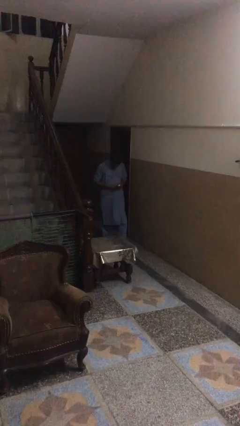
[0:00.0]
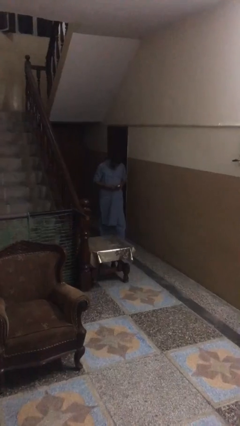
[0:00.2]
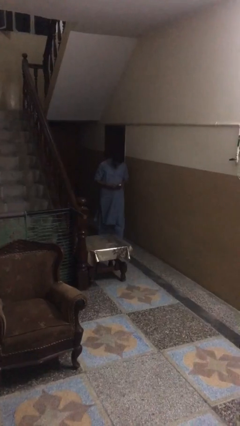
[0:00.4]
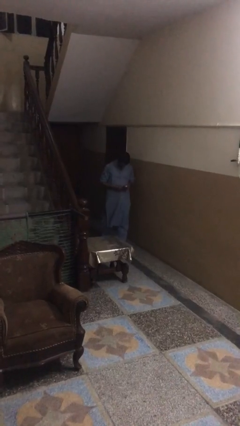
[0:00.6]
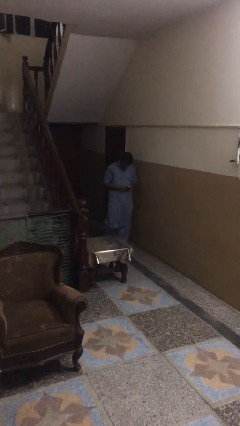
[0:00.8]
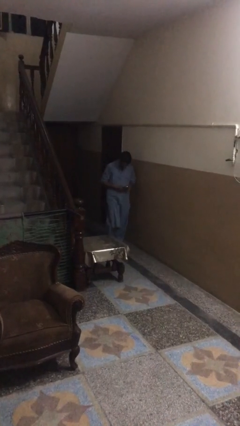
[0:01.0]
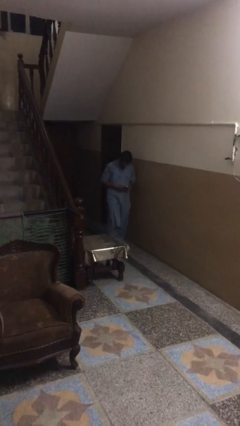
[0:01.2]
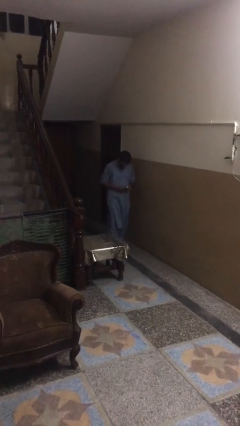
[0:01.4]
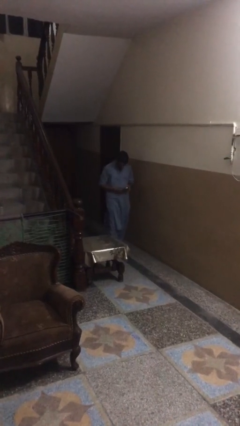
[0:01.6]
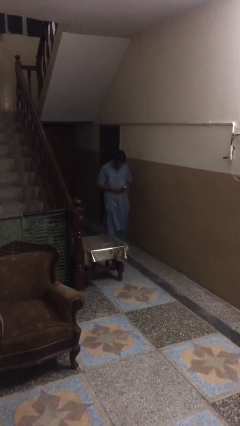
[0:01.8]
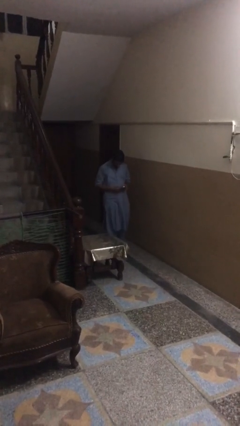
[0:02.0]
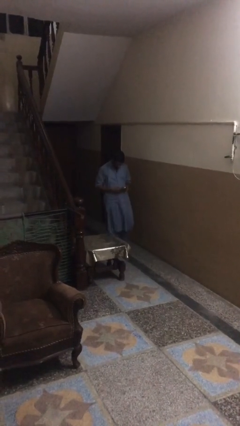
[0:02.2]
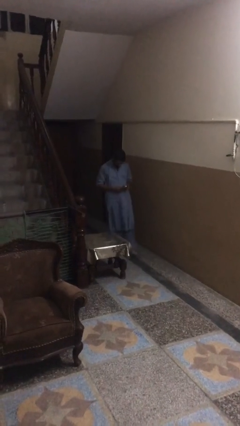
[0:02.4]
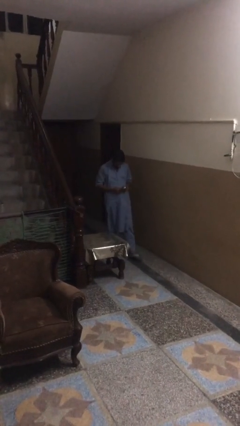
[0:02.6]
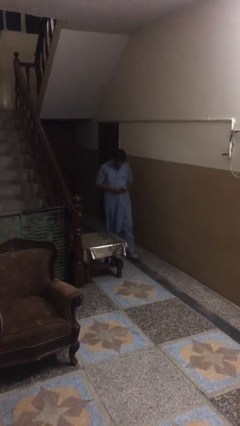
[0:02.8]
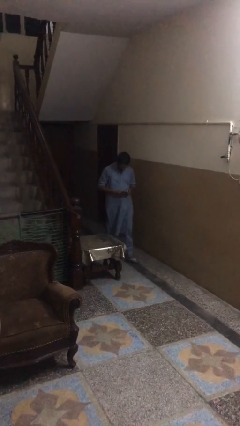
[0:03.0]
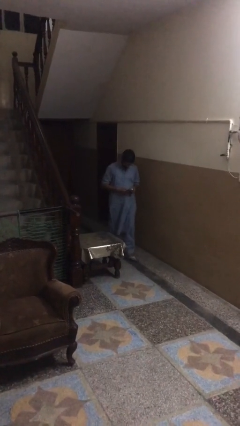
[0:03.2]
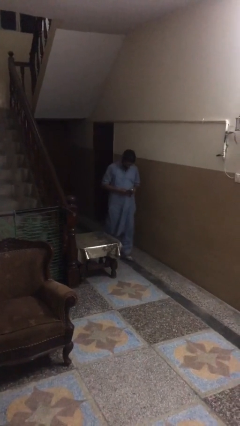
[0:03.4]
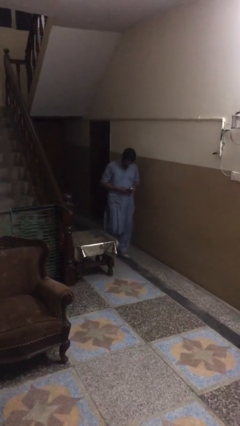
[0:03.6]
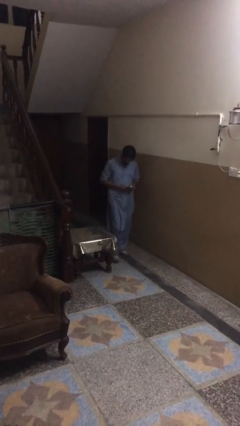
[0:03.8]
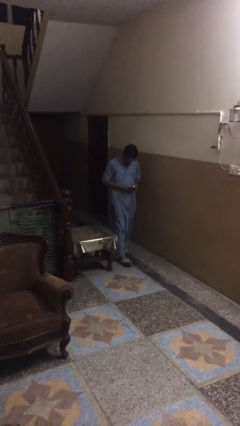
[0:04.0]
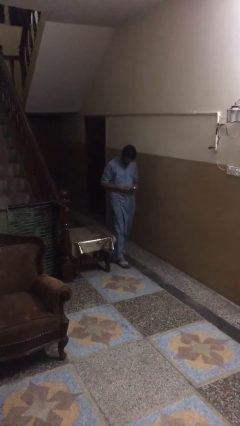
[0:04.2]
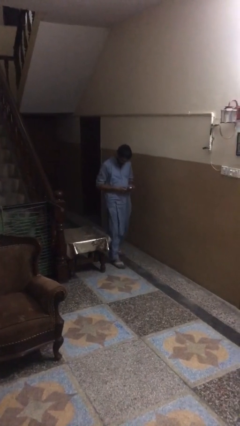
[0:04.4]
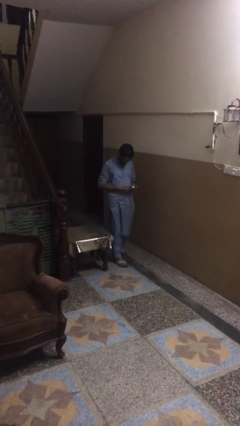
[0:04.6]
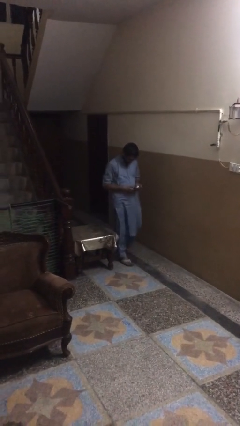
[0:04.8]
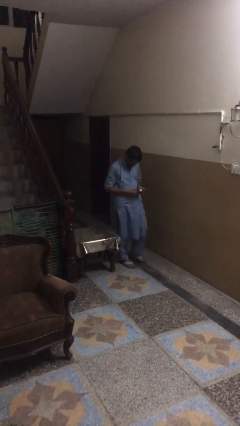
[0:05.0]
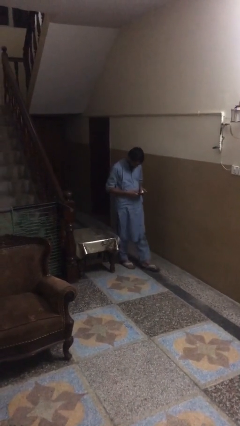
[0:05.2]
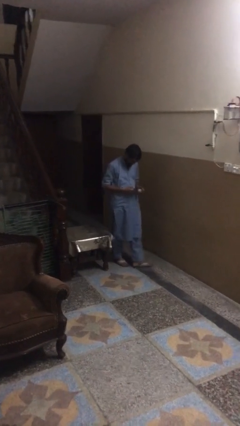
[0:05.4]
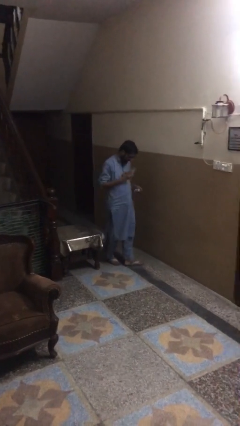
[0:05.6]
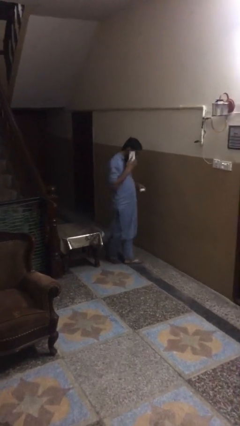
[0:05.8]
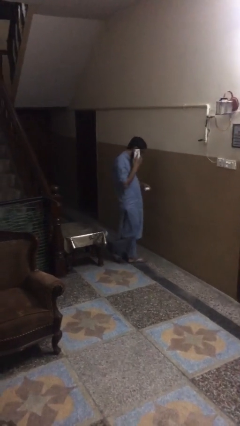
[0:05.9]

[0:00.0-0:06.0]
person texts on phone

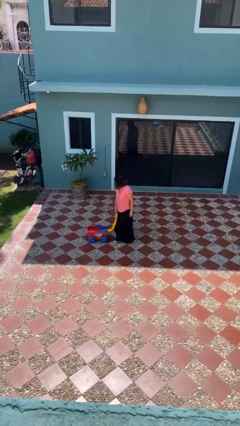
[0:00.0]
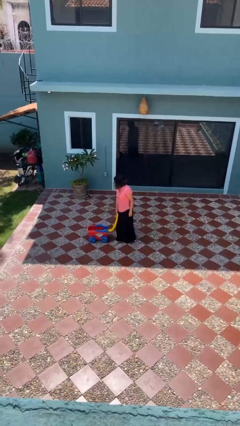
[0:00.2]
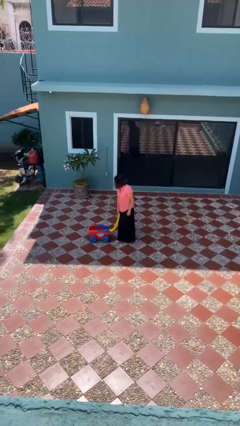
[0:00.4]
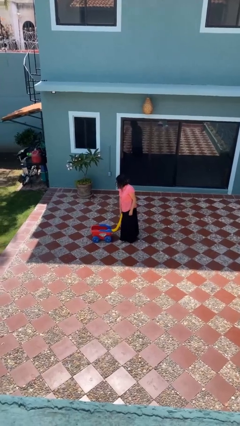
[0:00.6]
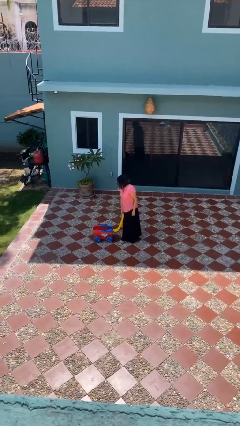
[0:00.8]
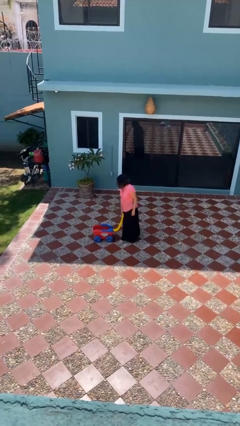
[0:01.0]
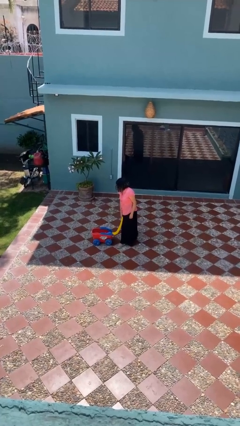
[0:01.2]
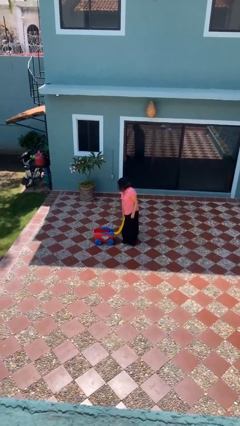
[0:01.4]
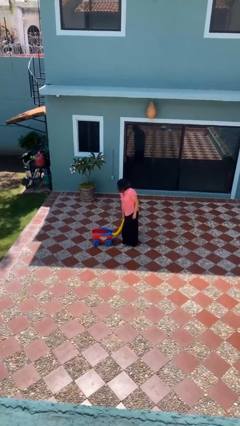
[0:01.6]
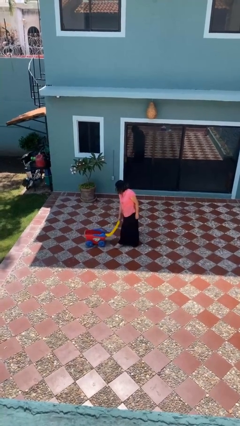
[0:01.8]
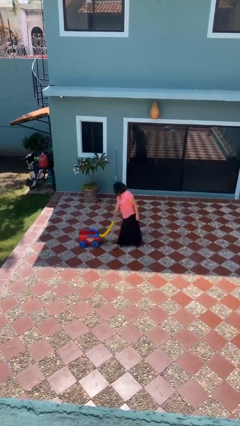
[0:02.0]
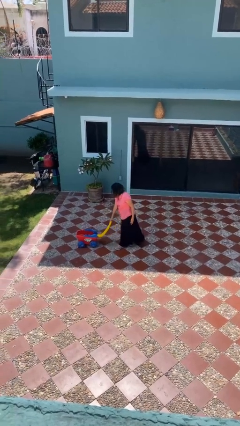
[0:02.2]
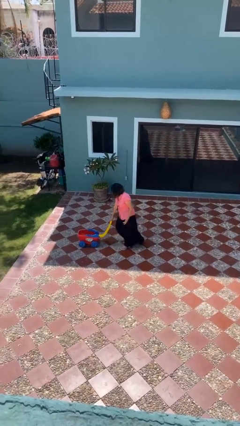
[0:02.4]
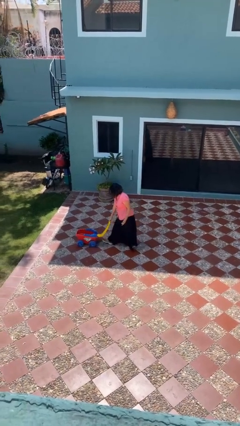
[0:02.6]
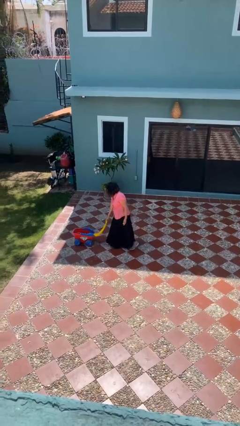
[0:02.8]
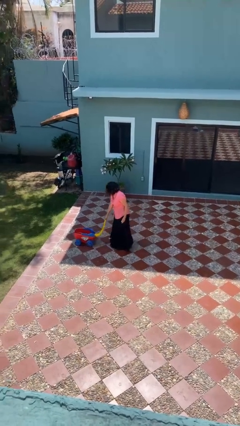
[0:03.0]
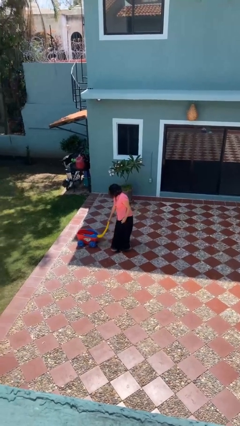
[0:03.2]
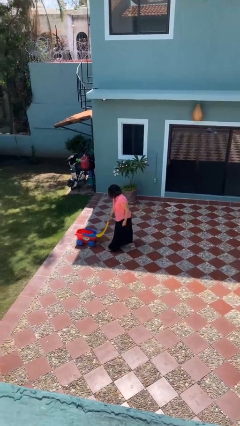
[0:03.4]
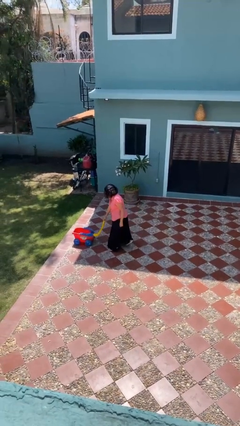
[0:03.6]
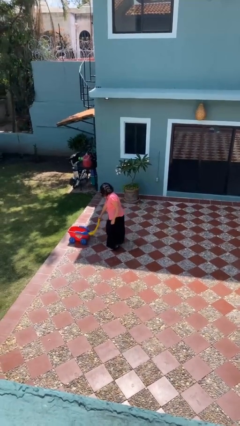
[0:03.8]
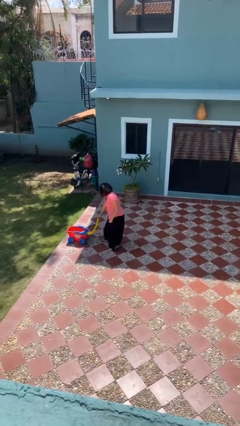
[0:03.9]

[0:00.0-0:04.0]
person pushes wheeled cart

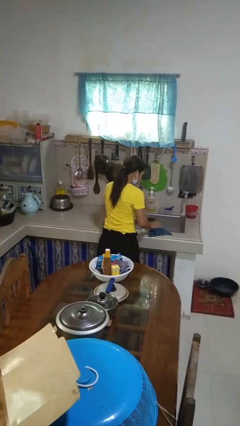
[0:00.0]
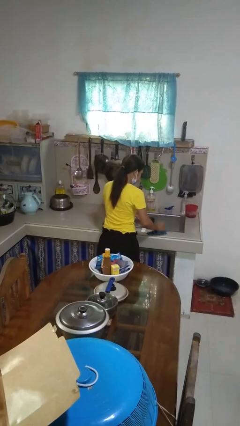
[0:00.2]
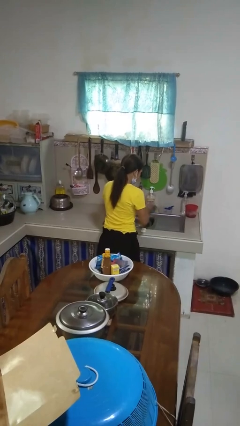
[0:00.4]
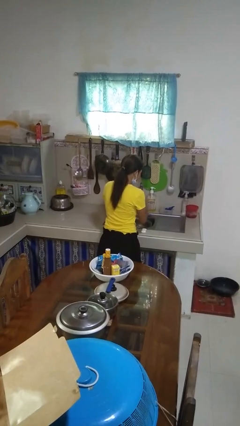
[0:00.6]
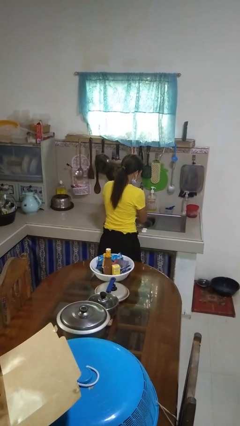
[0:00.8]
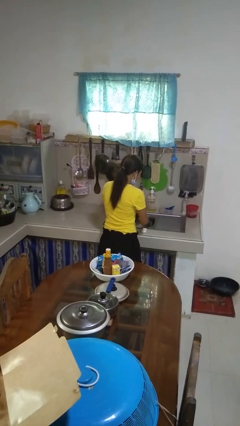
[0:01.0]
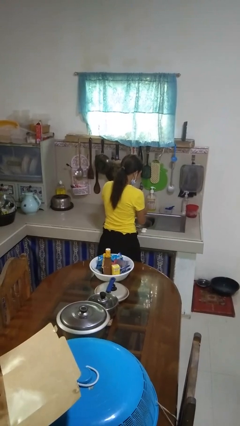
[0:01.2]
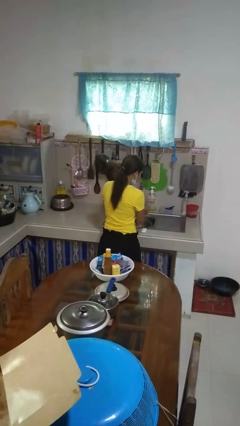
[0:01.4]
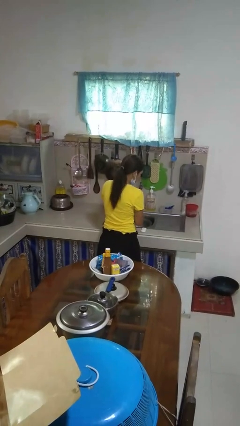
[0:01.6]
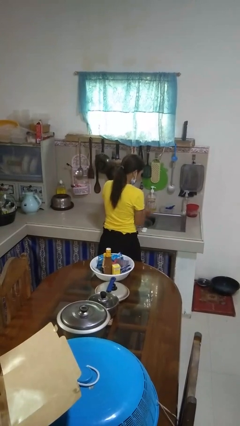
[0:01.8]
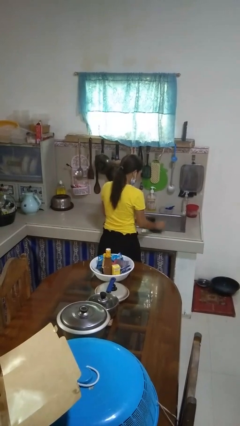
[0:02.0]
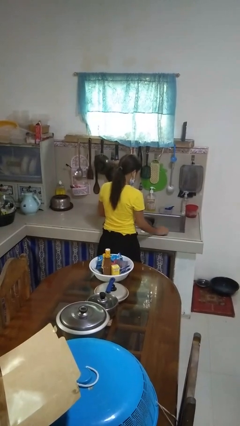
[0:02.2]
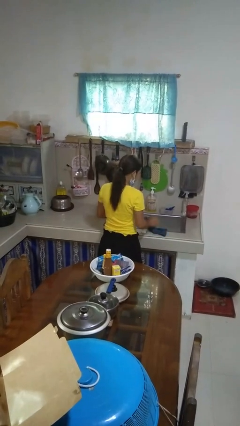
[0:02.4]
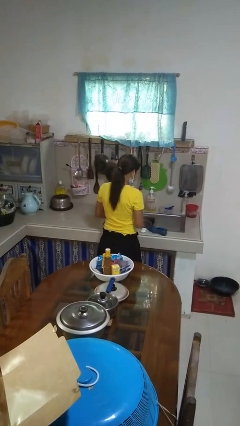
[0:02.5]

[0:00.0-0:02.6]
person dries hands with towel

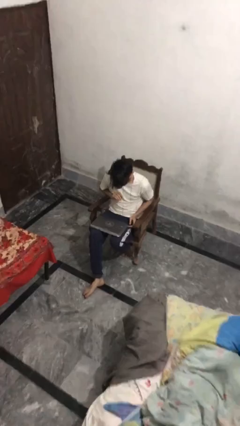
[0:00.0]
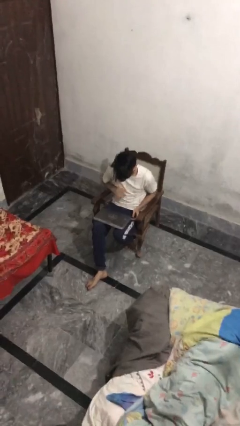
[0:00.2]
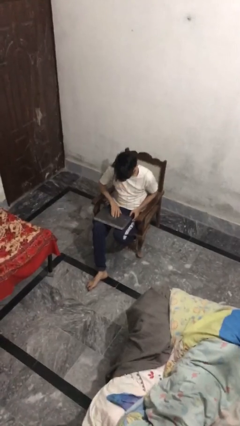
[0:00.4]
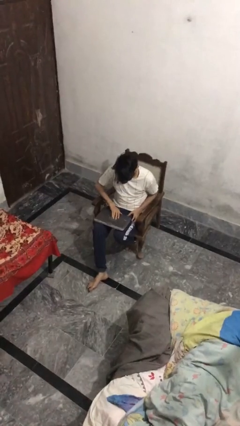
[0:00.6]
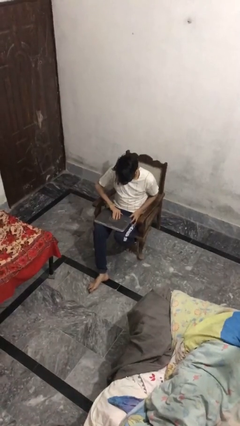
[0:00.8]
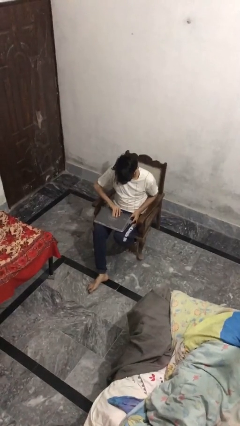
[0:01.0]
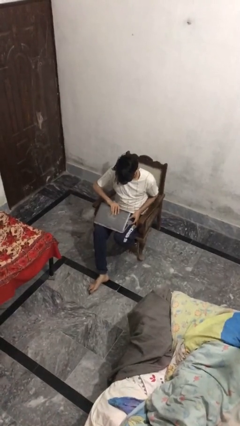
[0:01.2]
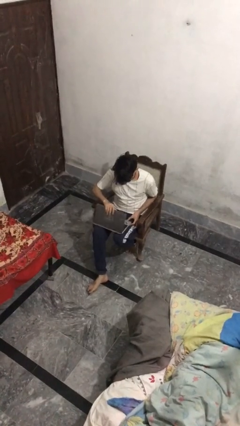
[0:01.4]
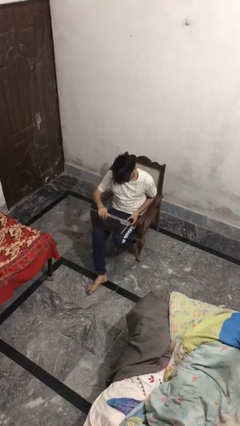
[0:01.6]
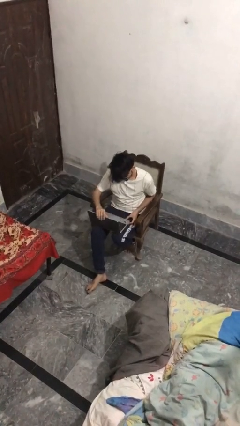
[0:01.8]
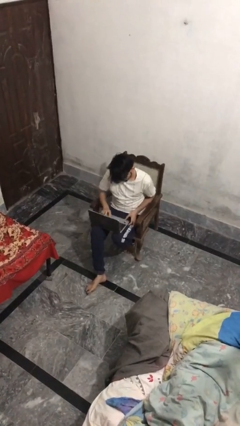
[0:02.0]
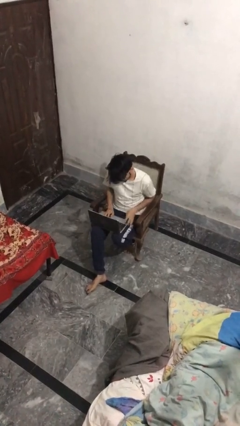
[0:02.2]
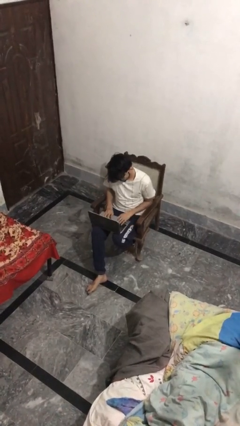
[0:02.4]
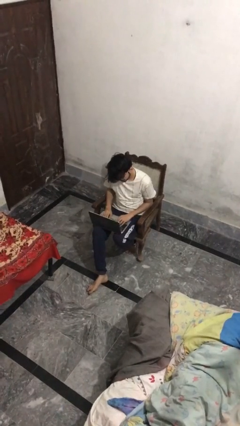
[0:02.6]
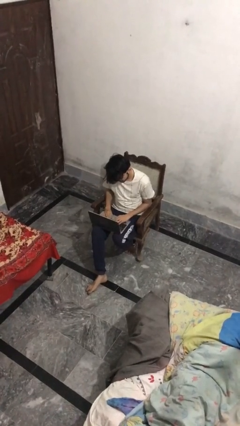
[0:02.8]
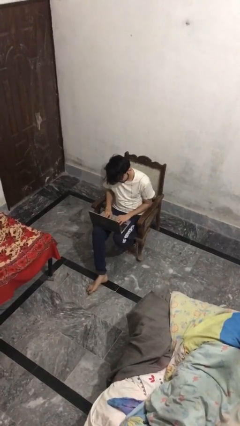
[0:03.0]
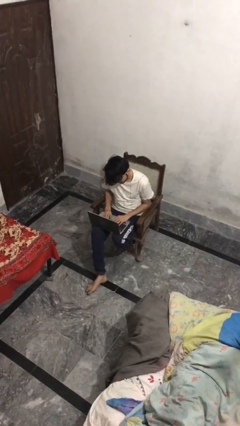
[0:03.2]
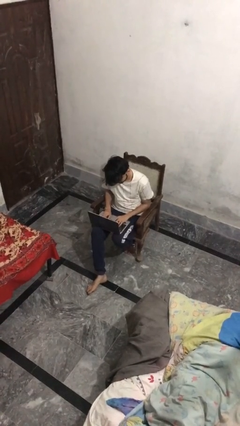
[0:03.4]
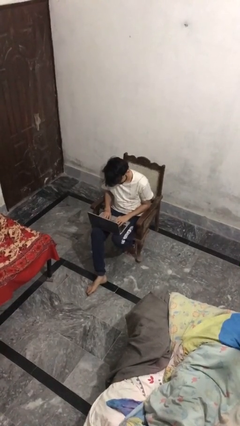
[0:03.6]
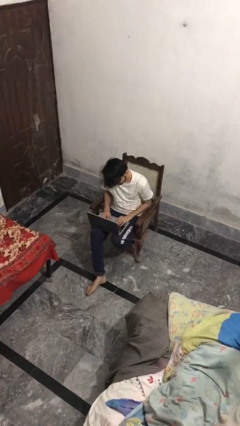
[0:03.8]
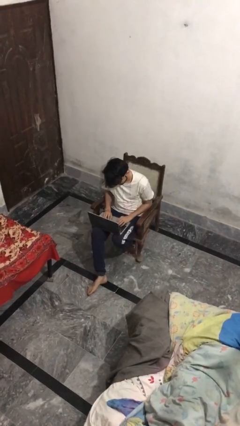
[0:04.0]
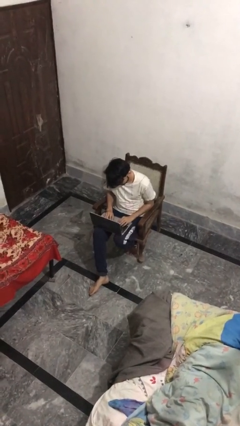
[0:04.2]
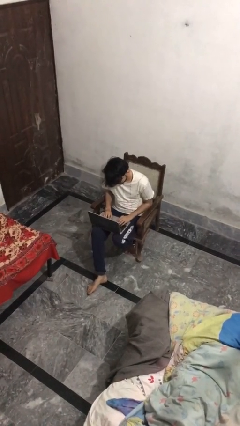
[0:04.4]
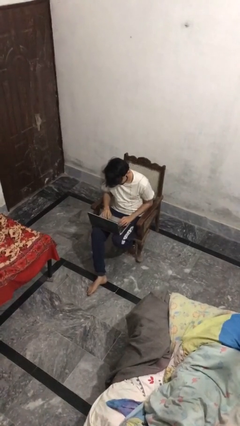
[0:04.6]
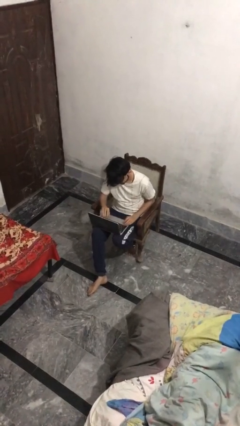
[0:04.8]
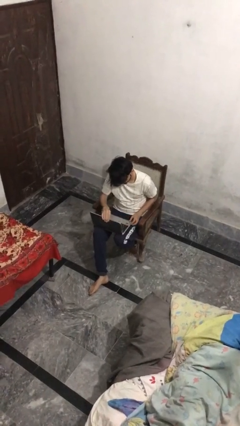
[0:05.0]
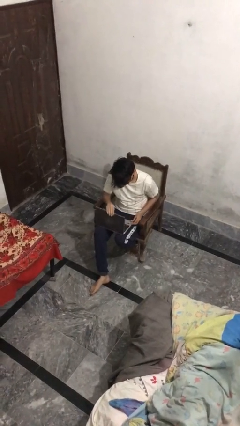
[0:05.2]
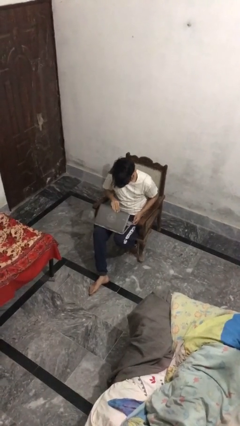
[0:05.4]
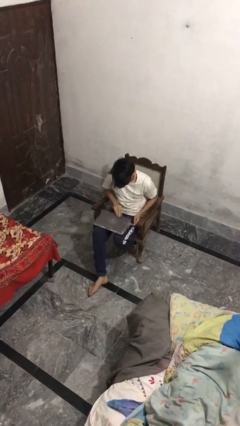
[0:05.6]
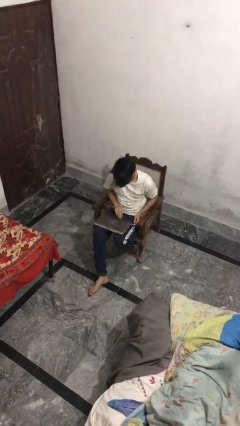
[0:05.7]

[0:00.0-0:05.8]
person interacts with laptop
